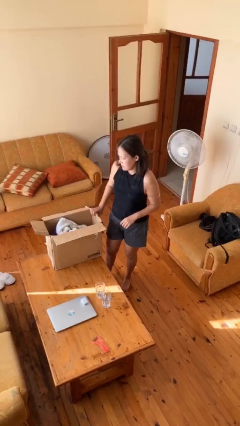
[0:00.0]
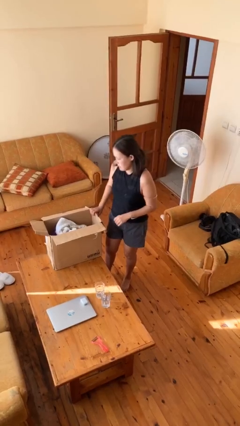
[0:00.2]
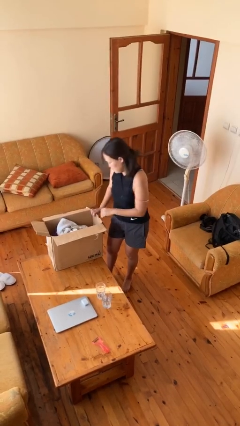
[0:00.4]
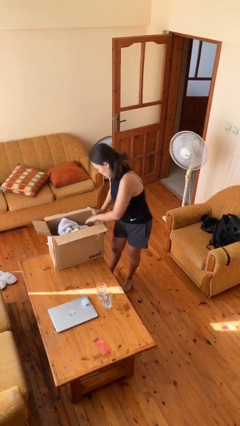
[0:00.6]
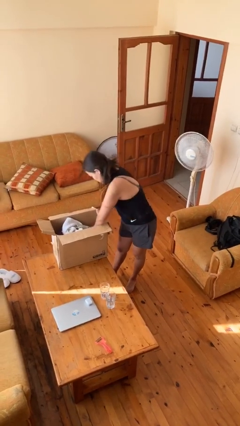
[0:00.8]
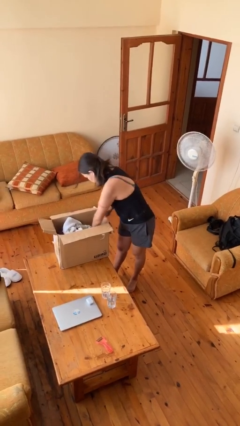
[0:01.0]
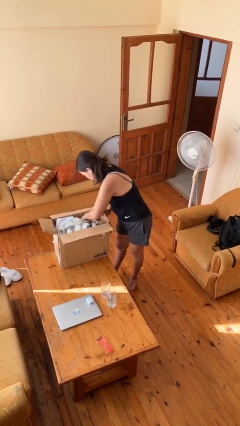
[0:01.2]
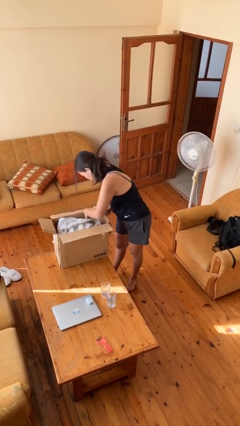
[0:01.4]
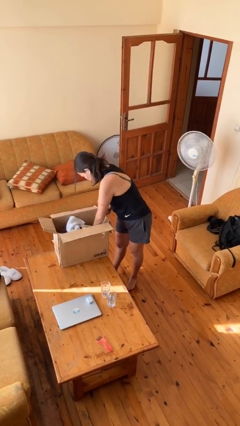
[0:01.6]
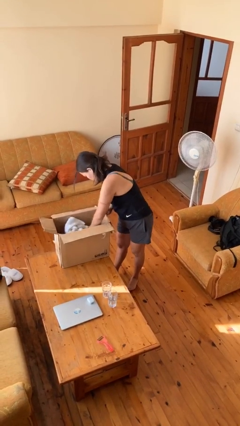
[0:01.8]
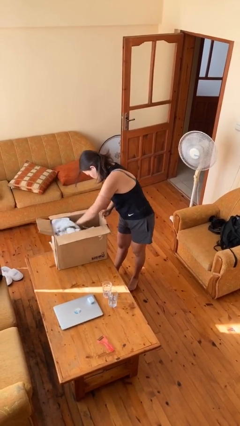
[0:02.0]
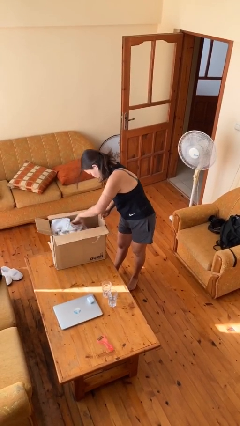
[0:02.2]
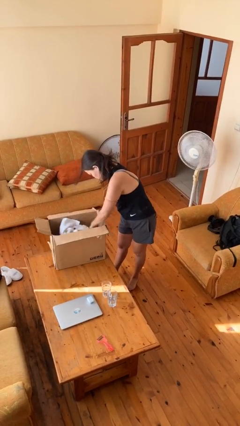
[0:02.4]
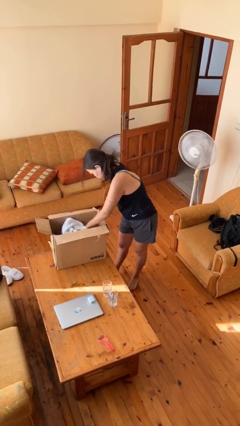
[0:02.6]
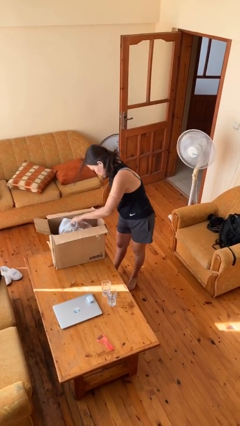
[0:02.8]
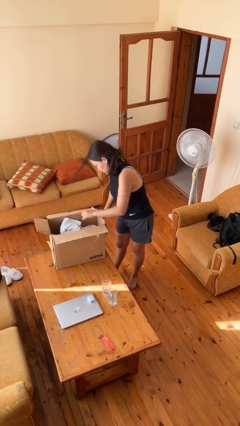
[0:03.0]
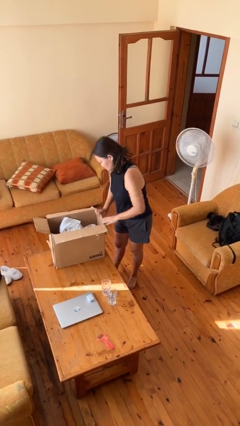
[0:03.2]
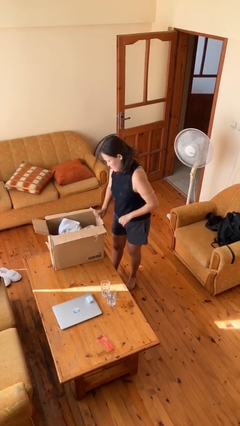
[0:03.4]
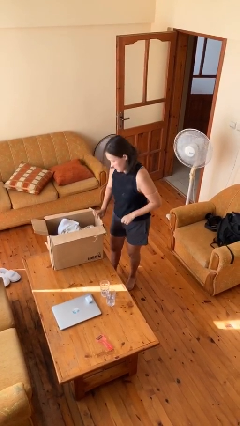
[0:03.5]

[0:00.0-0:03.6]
person searches in box

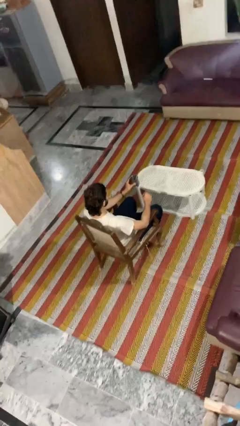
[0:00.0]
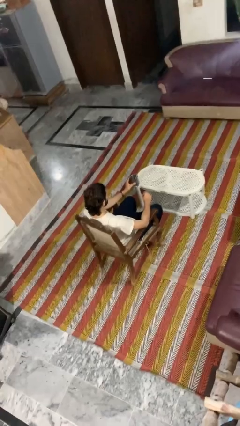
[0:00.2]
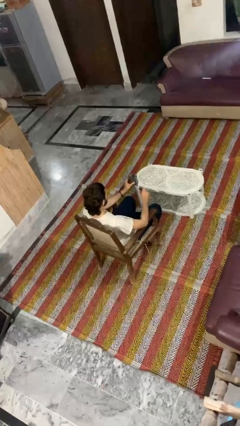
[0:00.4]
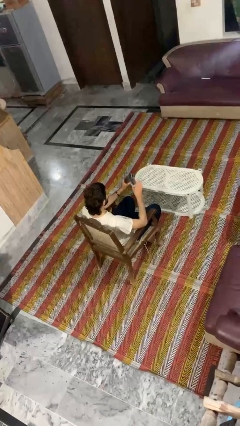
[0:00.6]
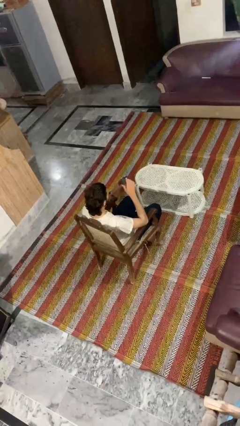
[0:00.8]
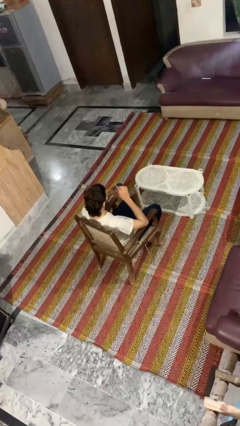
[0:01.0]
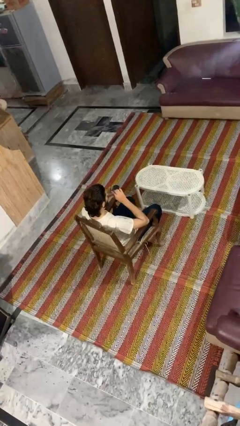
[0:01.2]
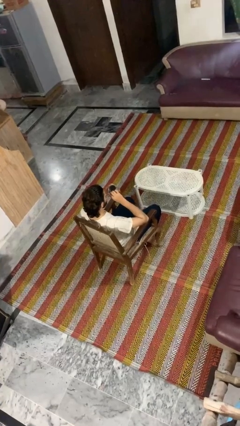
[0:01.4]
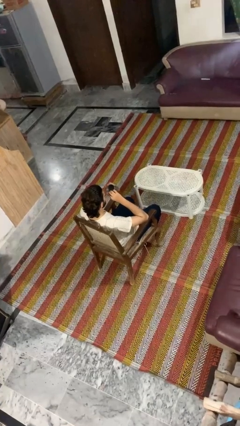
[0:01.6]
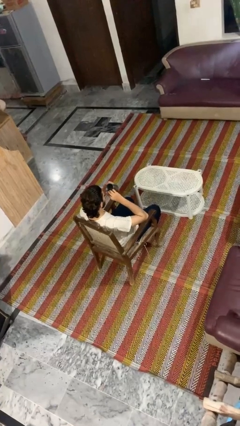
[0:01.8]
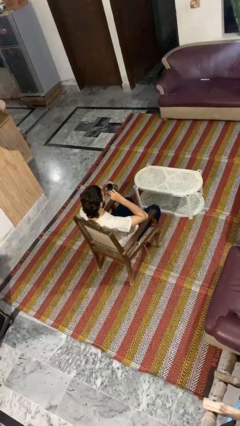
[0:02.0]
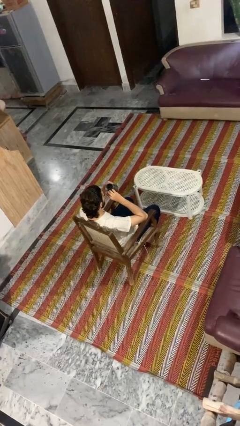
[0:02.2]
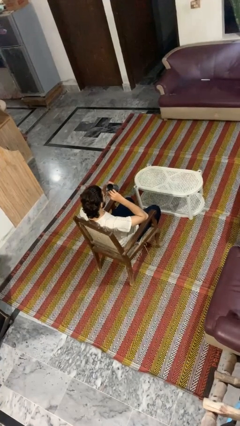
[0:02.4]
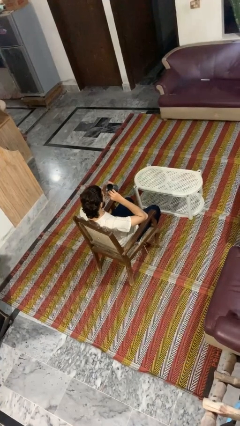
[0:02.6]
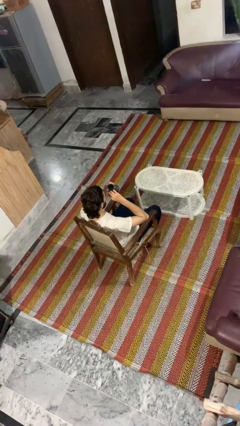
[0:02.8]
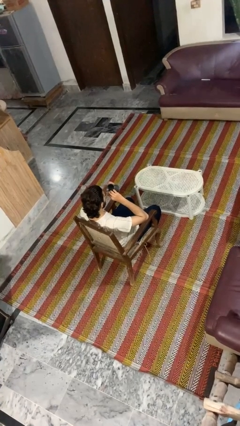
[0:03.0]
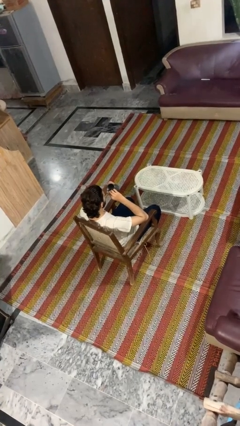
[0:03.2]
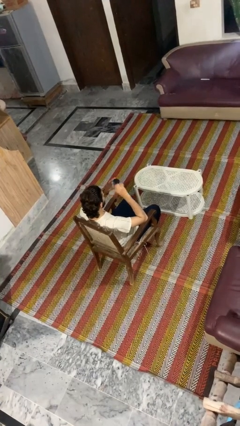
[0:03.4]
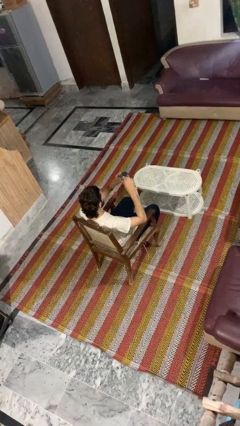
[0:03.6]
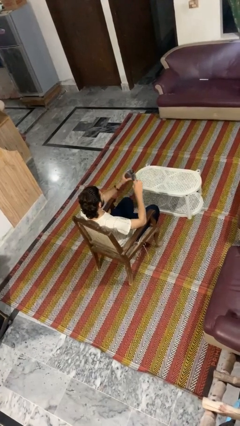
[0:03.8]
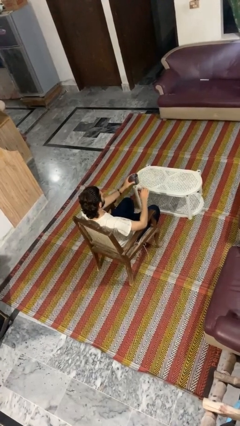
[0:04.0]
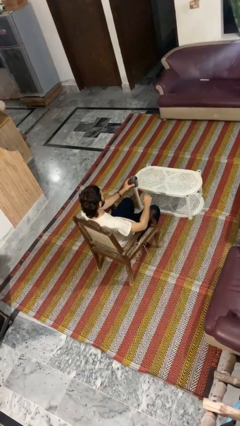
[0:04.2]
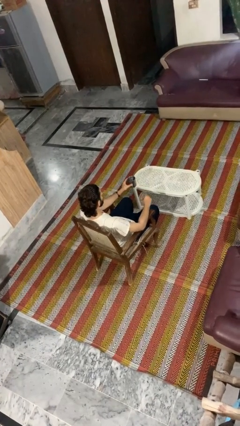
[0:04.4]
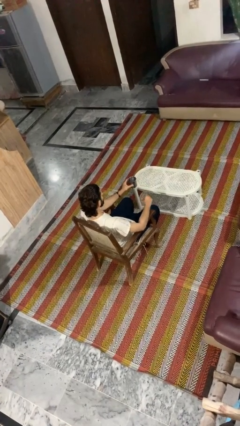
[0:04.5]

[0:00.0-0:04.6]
person drinks from straw

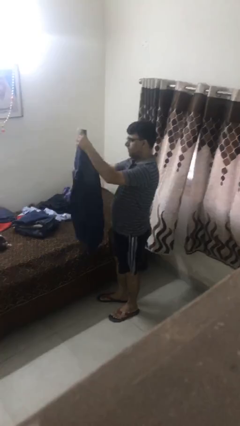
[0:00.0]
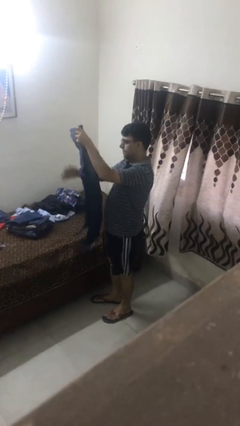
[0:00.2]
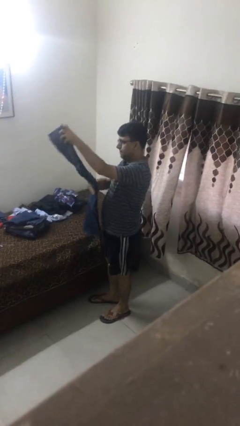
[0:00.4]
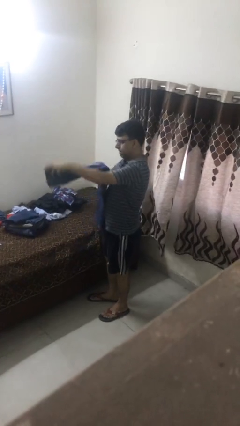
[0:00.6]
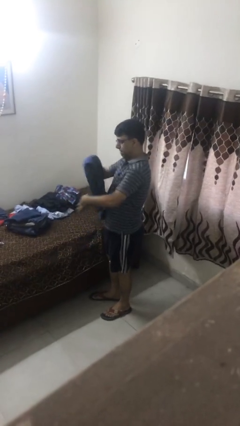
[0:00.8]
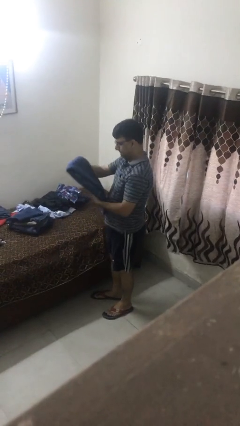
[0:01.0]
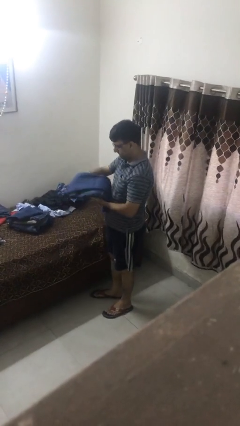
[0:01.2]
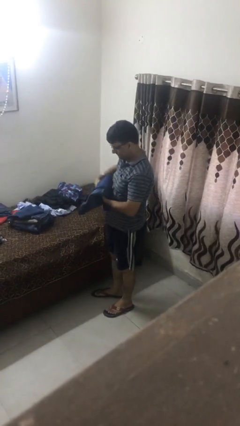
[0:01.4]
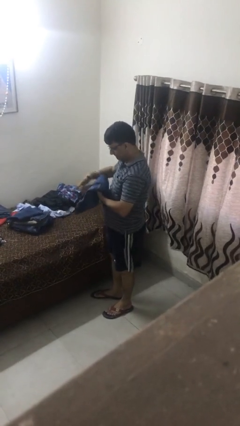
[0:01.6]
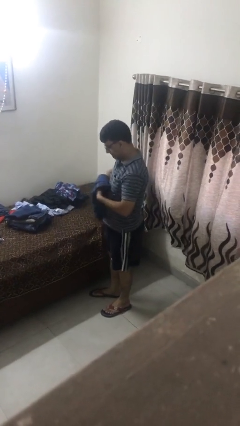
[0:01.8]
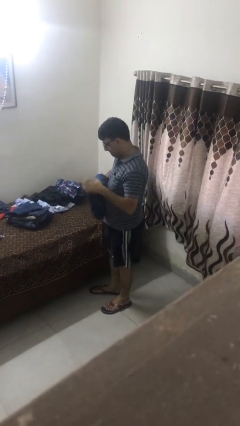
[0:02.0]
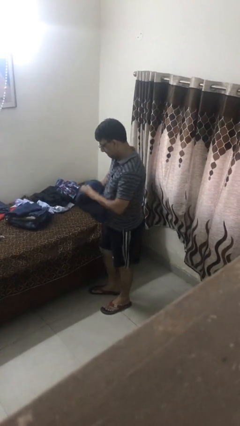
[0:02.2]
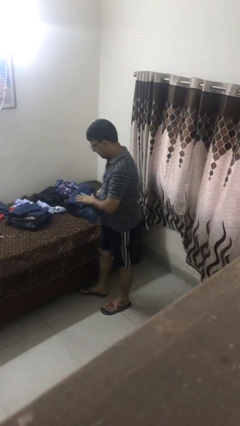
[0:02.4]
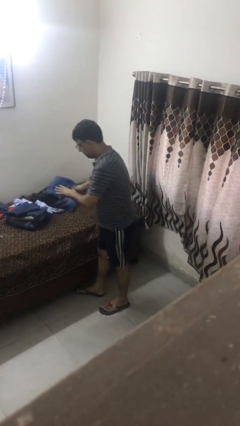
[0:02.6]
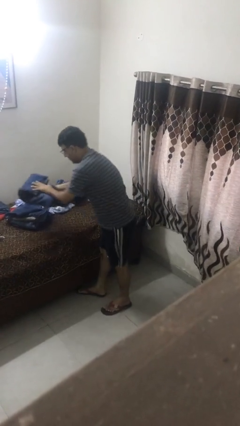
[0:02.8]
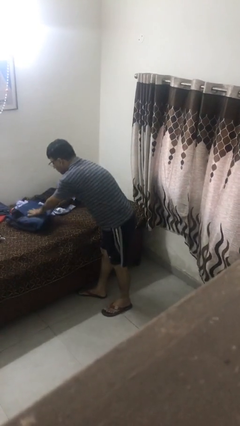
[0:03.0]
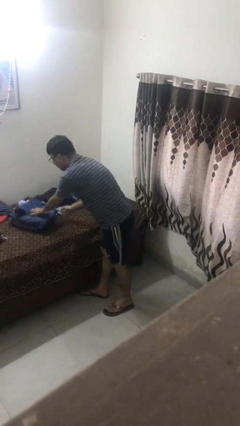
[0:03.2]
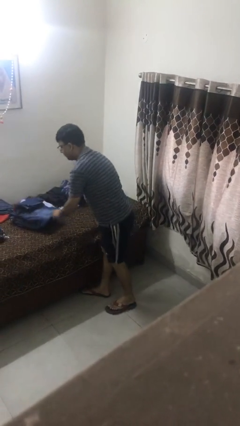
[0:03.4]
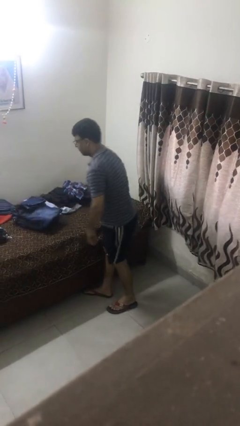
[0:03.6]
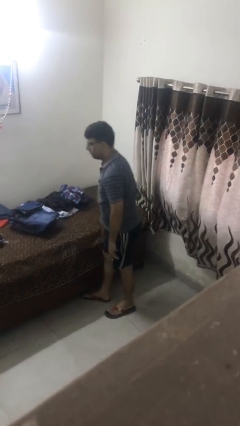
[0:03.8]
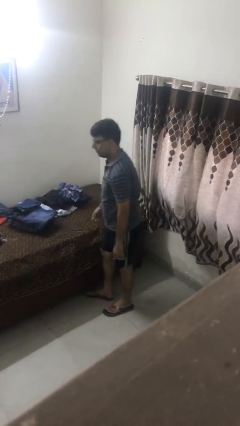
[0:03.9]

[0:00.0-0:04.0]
person folds pants

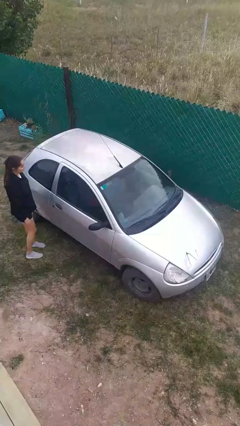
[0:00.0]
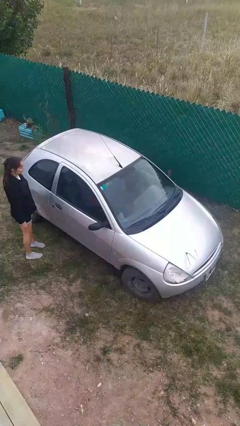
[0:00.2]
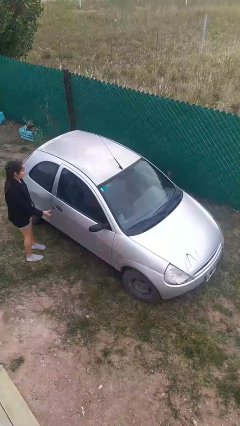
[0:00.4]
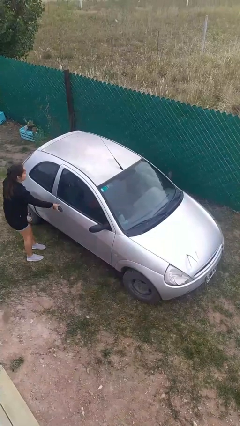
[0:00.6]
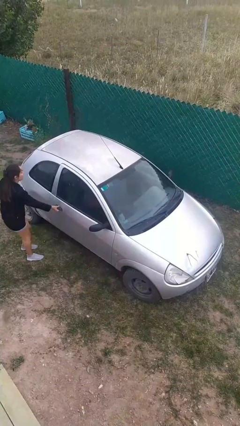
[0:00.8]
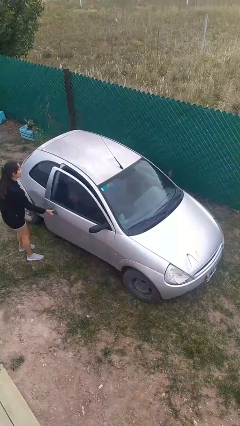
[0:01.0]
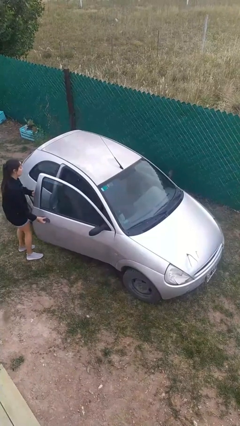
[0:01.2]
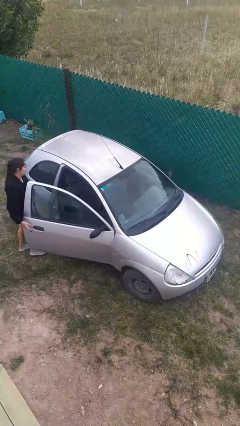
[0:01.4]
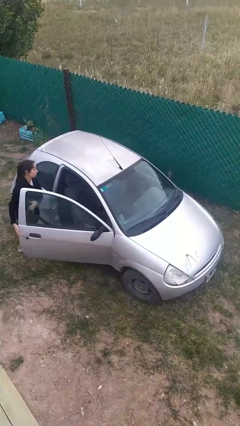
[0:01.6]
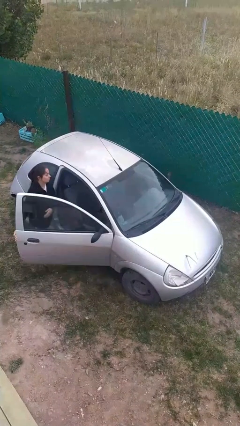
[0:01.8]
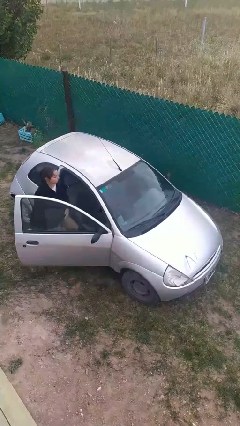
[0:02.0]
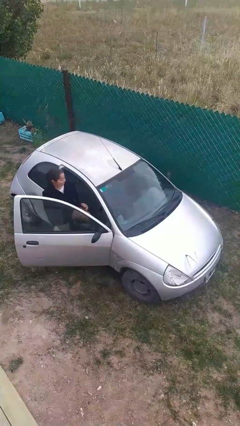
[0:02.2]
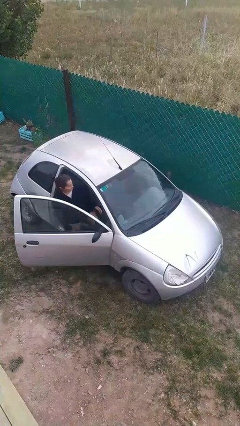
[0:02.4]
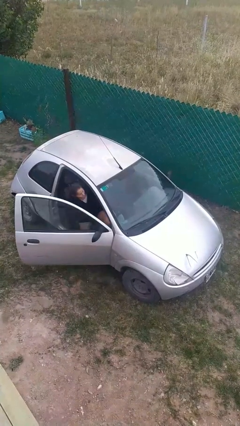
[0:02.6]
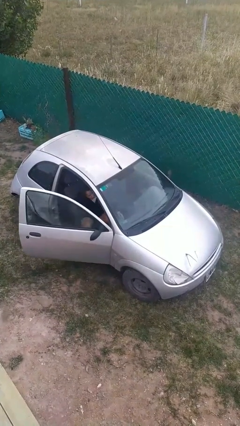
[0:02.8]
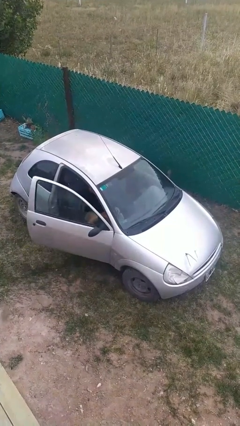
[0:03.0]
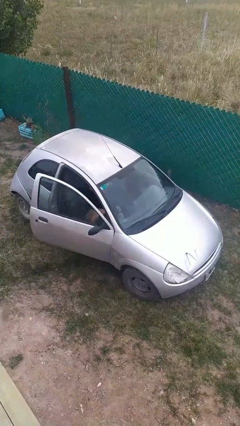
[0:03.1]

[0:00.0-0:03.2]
car picks up person

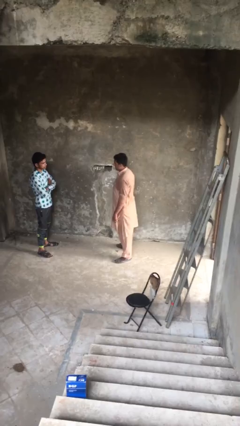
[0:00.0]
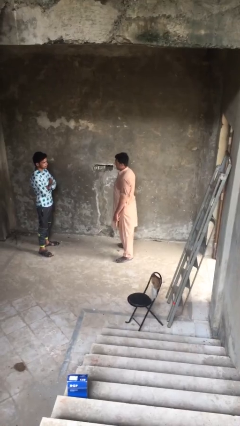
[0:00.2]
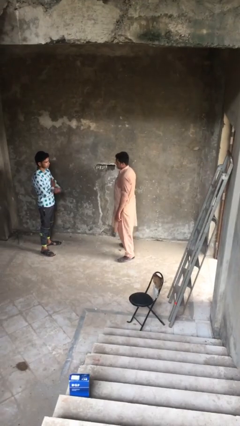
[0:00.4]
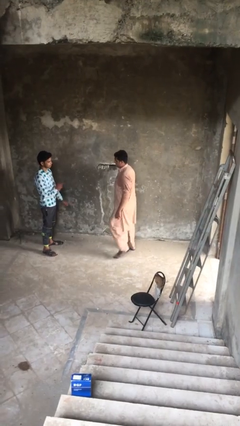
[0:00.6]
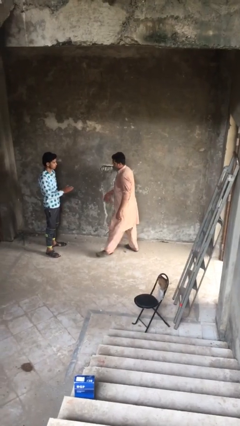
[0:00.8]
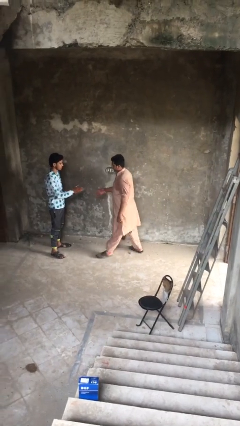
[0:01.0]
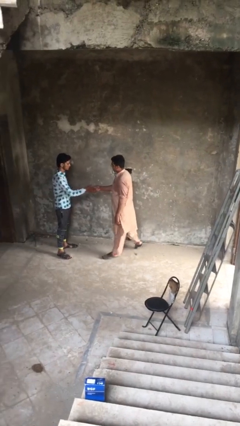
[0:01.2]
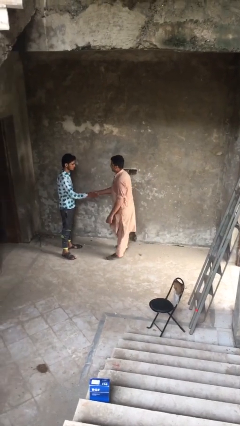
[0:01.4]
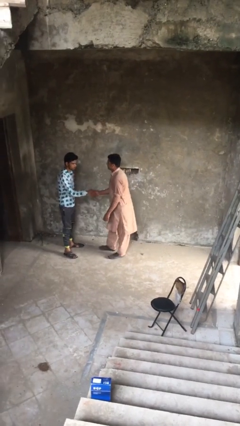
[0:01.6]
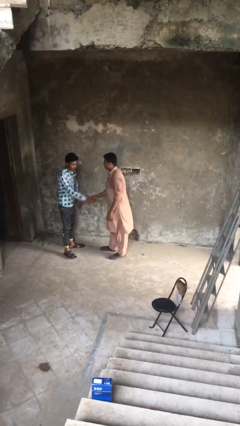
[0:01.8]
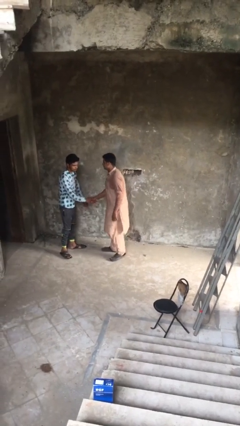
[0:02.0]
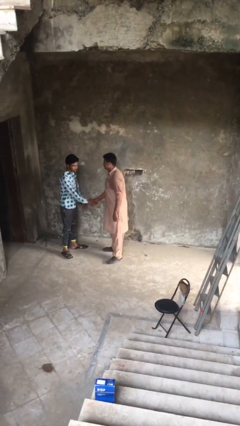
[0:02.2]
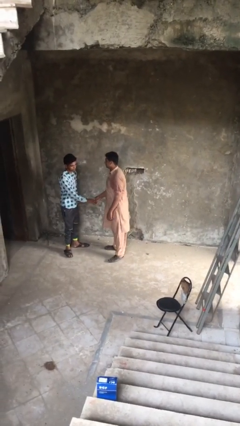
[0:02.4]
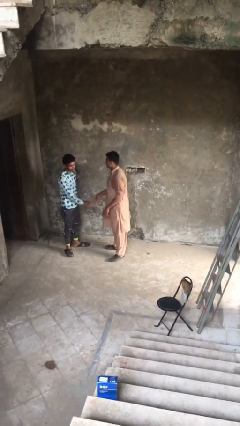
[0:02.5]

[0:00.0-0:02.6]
person shakes hand
